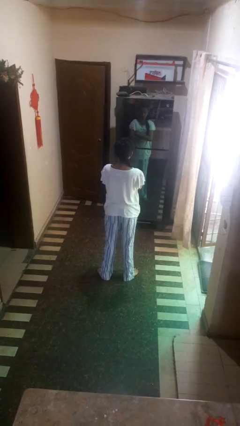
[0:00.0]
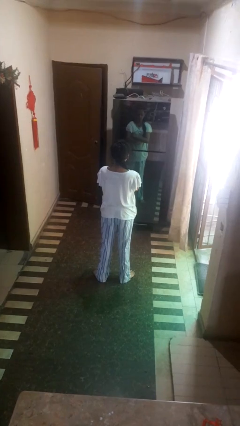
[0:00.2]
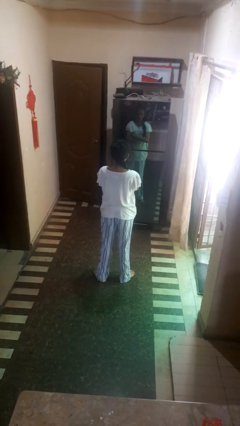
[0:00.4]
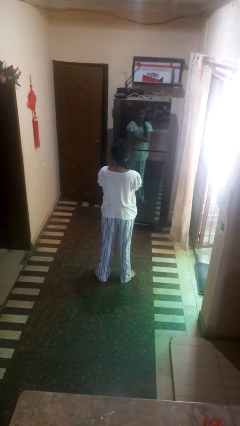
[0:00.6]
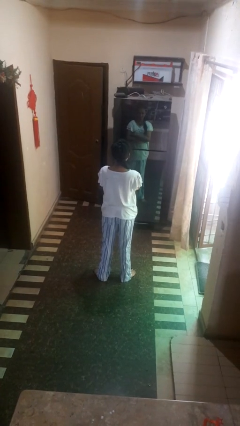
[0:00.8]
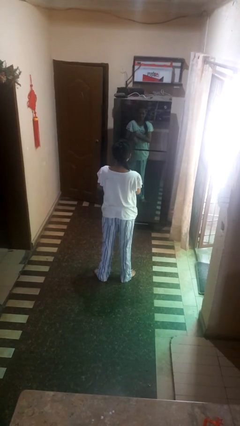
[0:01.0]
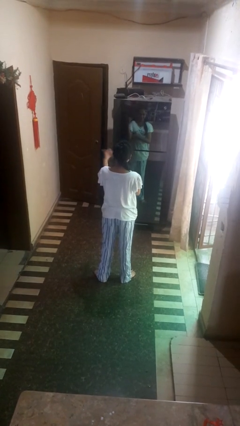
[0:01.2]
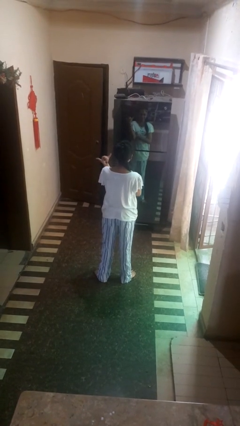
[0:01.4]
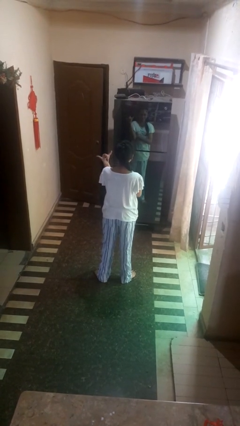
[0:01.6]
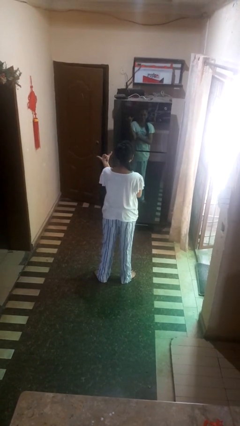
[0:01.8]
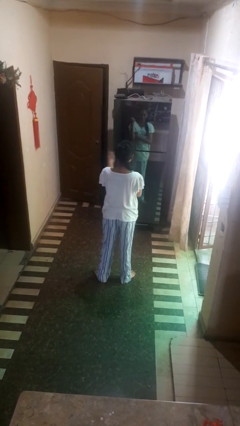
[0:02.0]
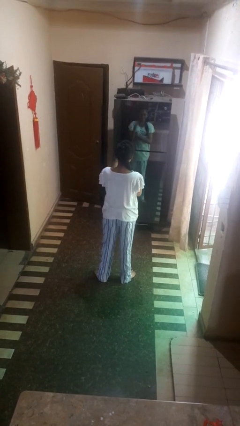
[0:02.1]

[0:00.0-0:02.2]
person gestures hang loose

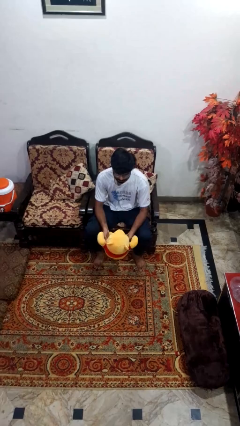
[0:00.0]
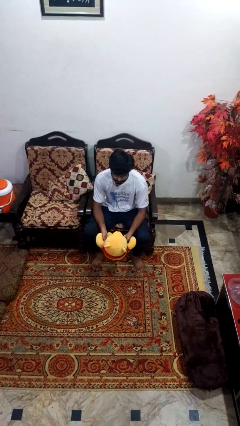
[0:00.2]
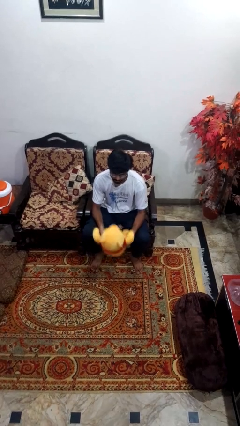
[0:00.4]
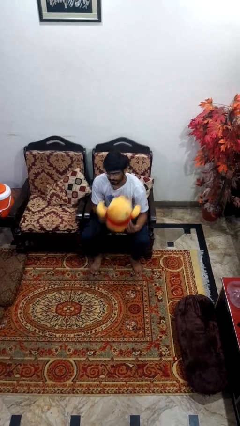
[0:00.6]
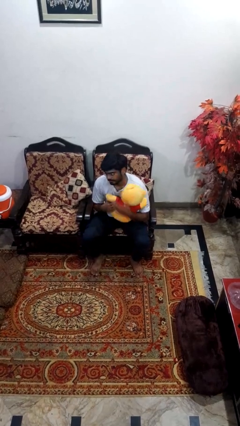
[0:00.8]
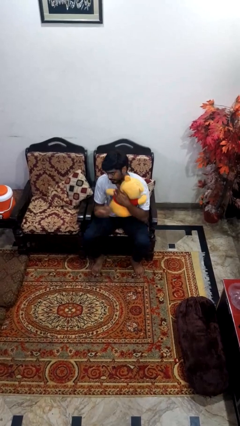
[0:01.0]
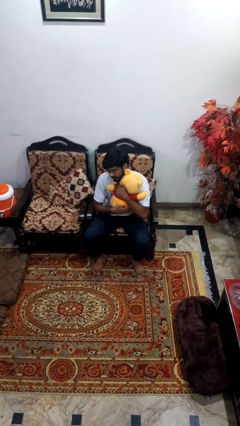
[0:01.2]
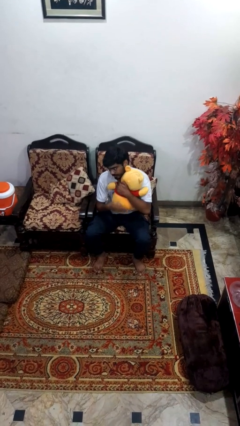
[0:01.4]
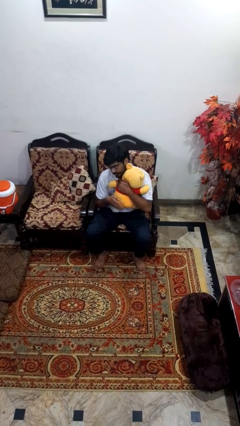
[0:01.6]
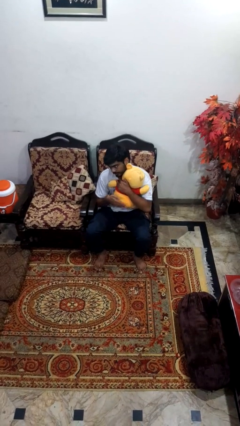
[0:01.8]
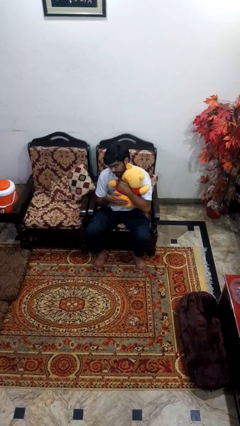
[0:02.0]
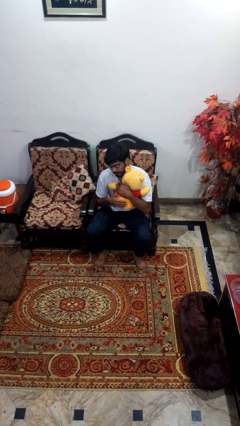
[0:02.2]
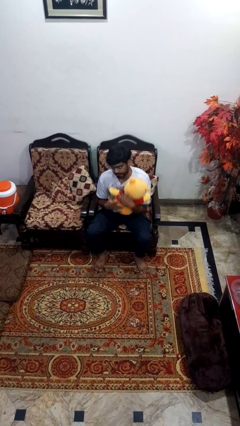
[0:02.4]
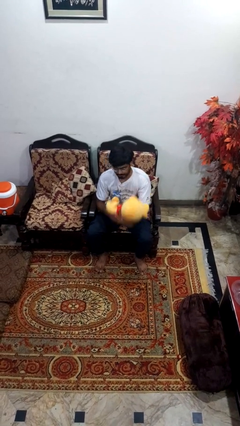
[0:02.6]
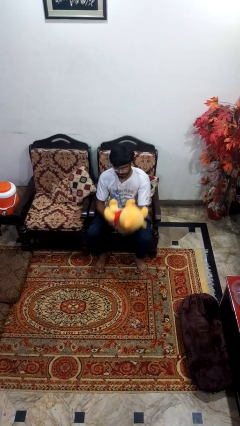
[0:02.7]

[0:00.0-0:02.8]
person hugs stuffed animal

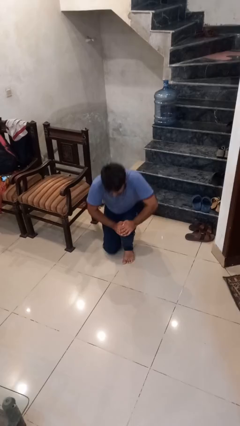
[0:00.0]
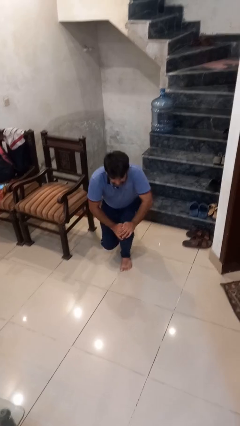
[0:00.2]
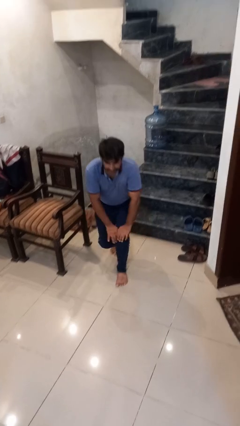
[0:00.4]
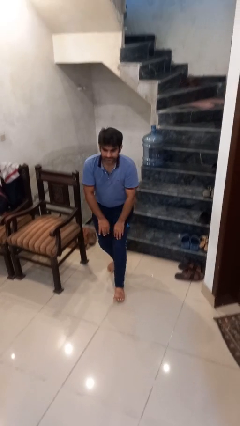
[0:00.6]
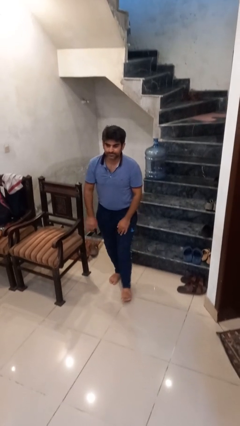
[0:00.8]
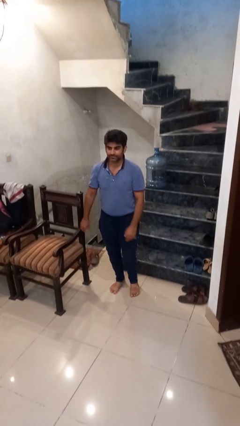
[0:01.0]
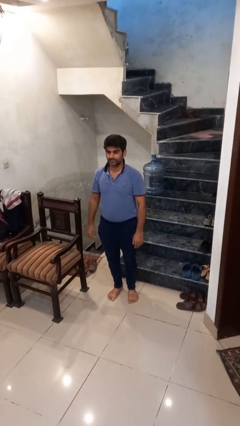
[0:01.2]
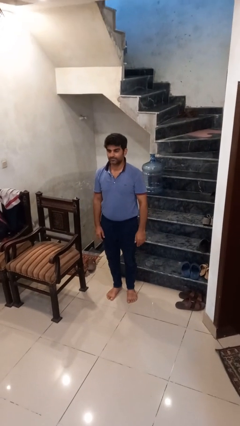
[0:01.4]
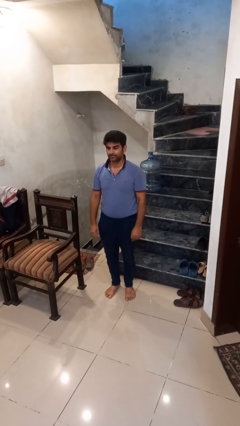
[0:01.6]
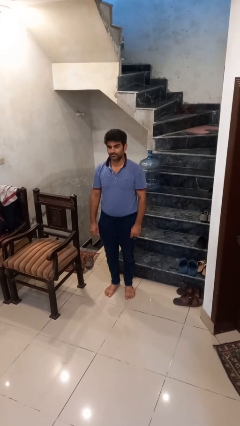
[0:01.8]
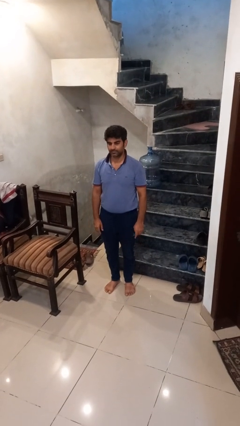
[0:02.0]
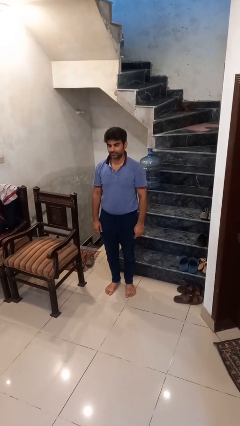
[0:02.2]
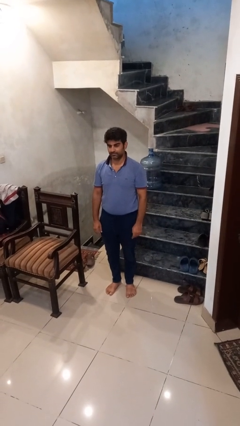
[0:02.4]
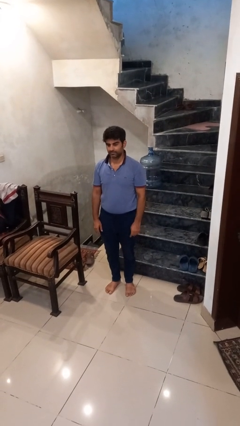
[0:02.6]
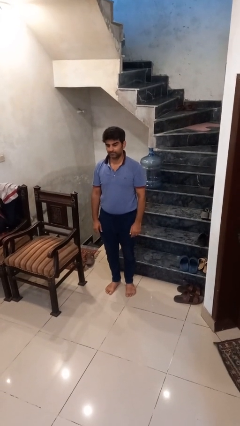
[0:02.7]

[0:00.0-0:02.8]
person stands up from floor

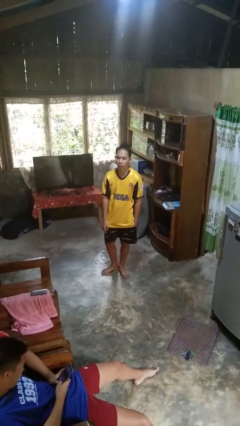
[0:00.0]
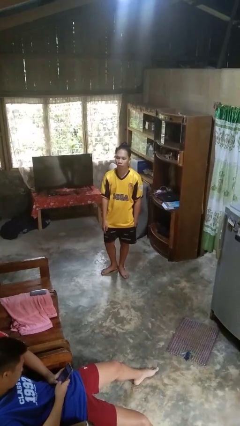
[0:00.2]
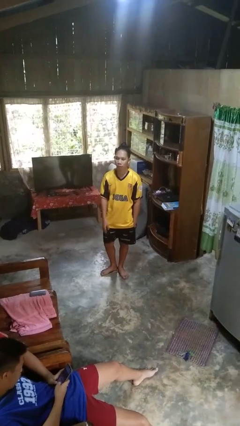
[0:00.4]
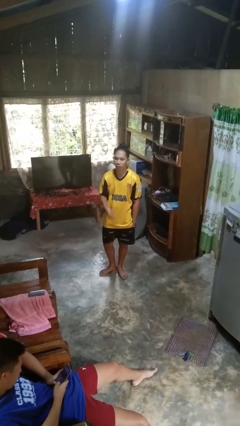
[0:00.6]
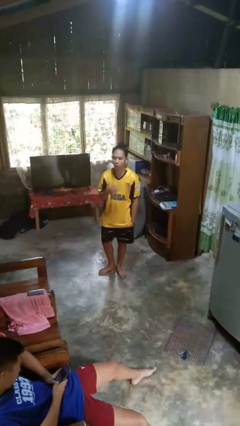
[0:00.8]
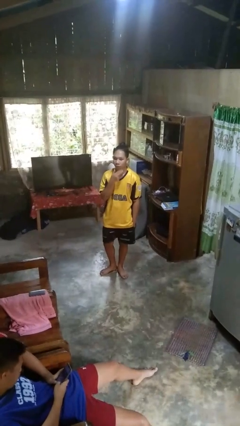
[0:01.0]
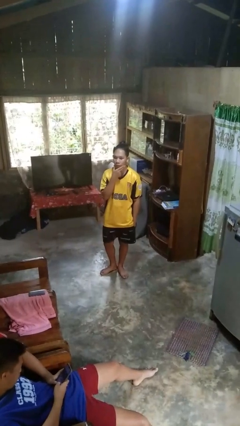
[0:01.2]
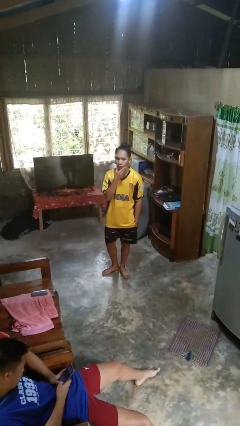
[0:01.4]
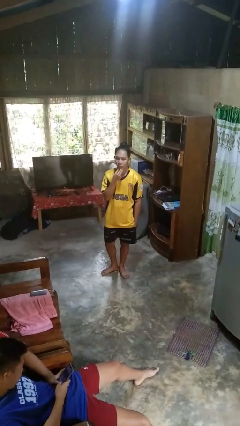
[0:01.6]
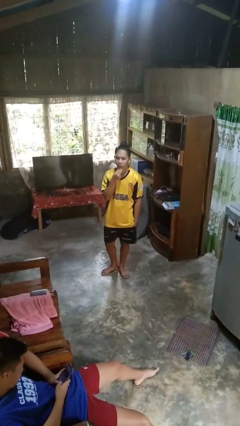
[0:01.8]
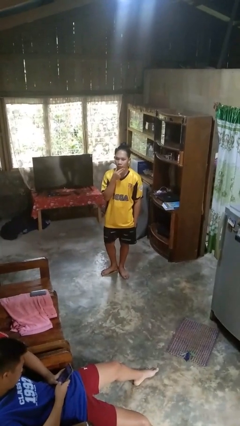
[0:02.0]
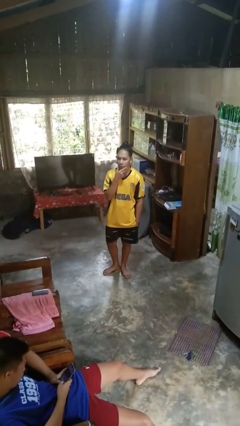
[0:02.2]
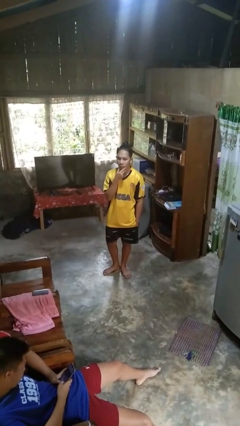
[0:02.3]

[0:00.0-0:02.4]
person strokes chin

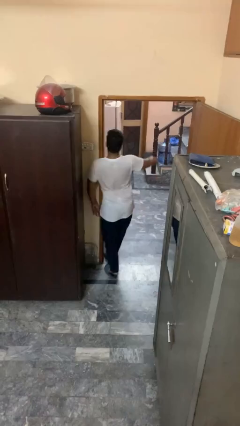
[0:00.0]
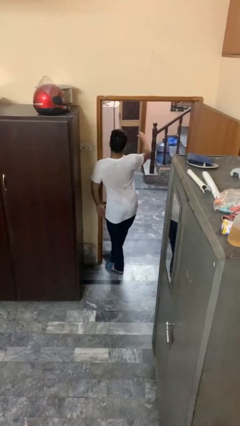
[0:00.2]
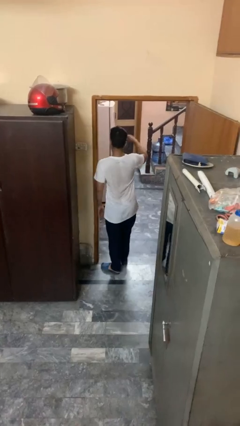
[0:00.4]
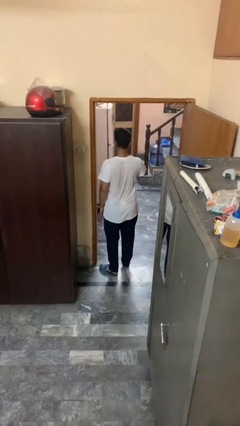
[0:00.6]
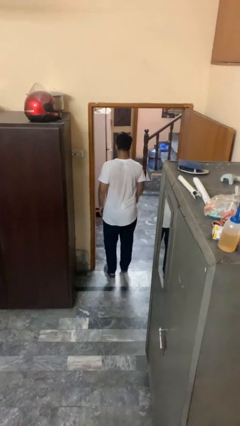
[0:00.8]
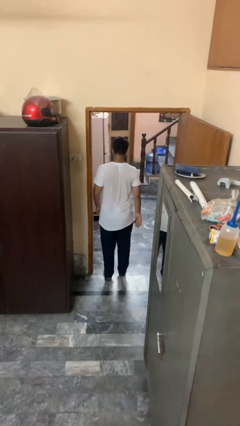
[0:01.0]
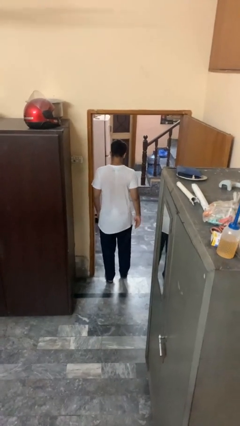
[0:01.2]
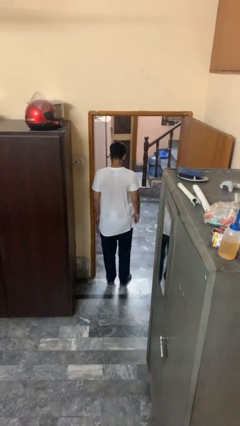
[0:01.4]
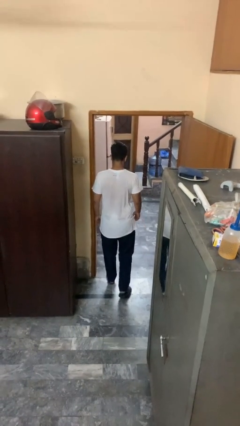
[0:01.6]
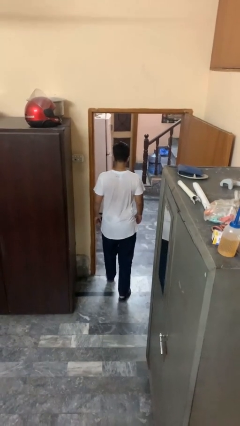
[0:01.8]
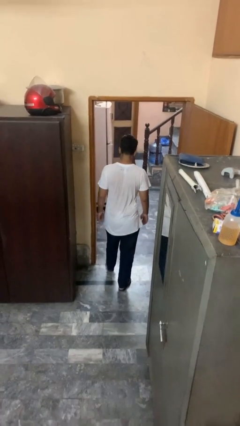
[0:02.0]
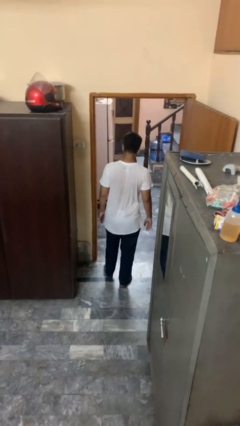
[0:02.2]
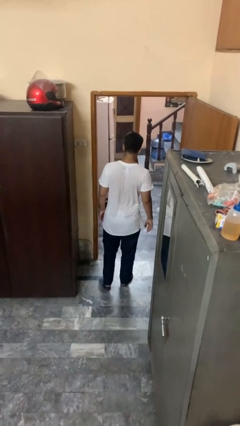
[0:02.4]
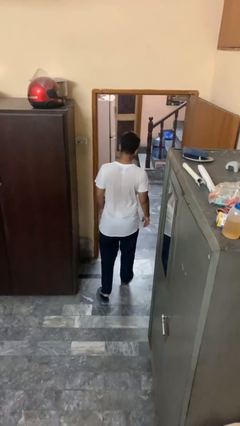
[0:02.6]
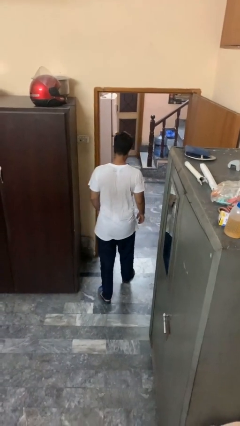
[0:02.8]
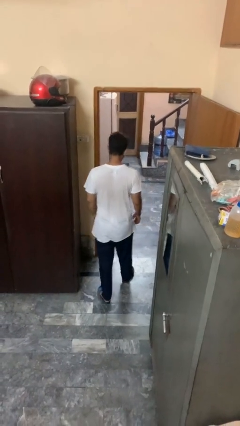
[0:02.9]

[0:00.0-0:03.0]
person bumps into wall

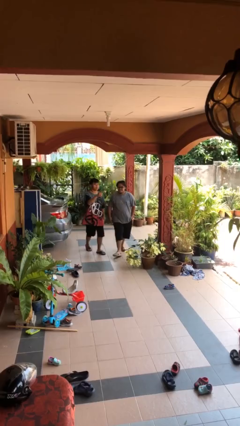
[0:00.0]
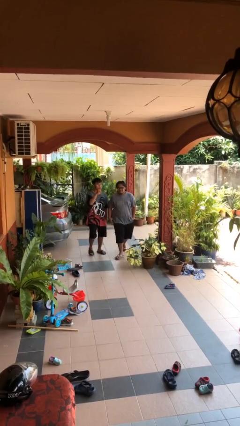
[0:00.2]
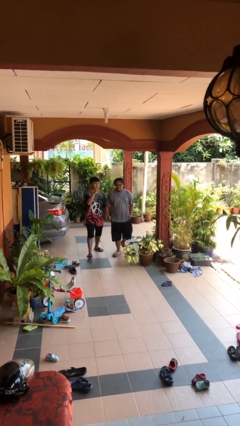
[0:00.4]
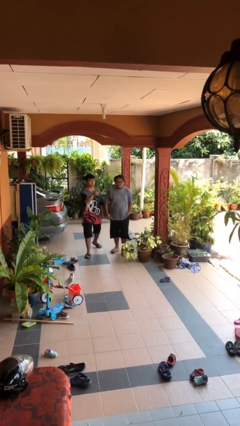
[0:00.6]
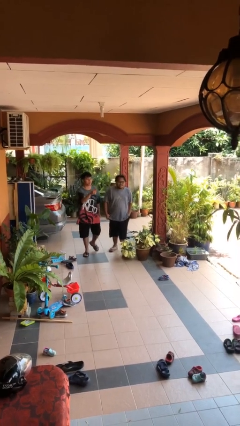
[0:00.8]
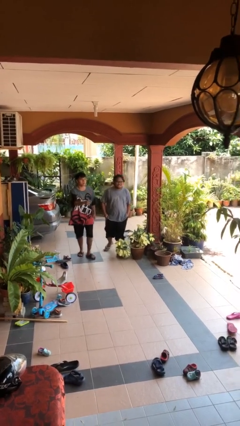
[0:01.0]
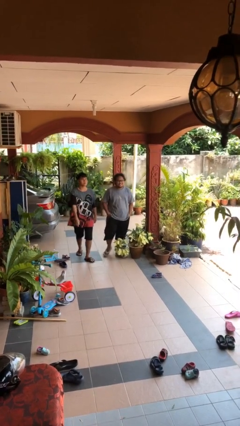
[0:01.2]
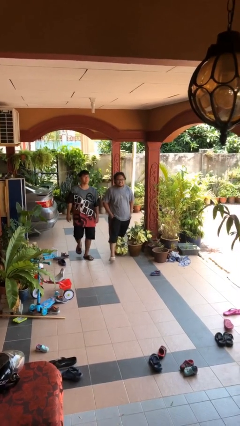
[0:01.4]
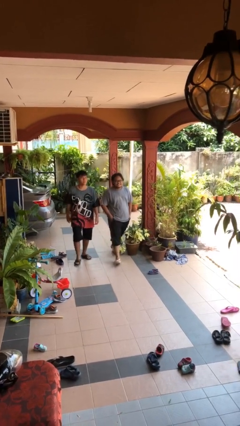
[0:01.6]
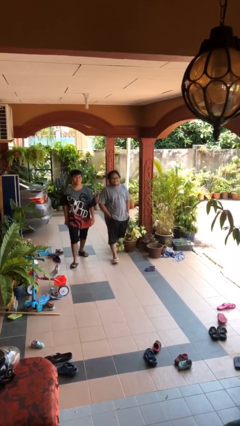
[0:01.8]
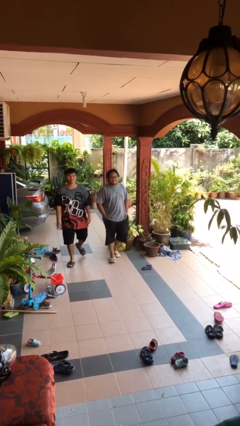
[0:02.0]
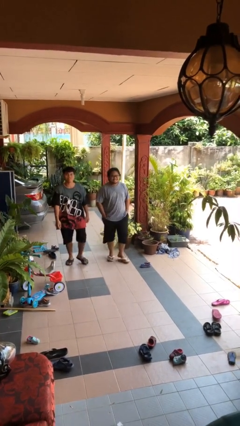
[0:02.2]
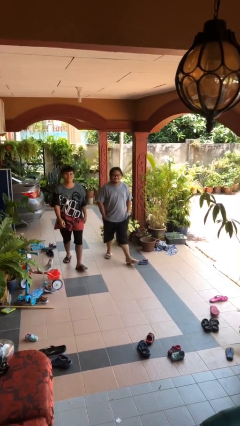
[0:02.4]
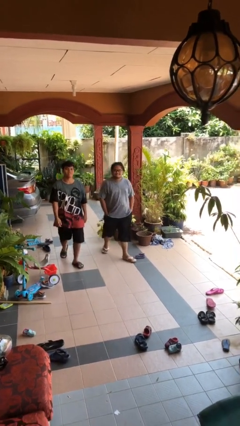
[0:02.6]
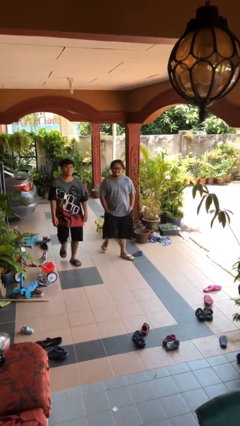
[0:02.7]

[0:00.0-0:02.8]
person talks to person

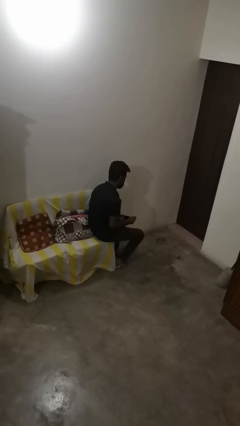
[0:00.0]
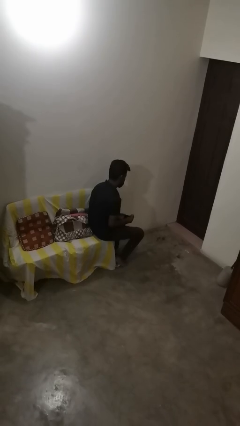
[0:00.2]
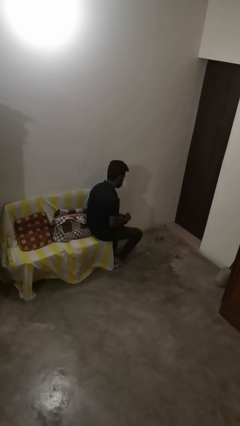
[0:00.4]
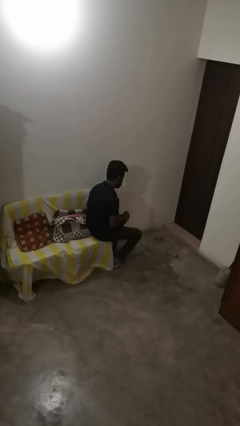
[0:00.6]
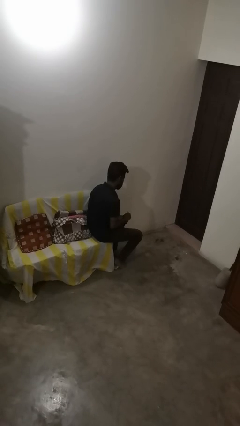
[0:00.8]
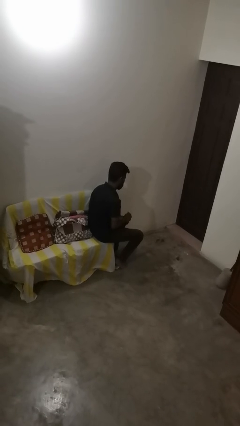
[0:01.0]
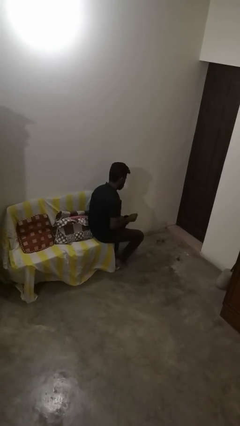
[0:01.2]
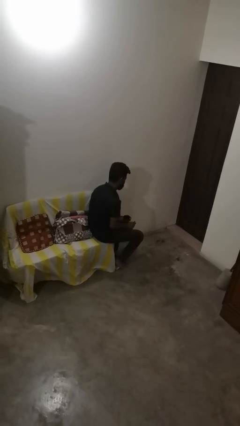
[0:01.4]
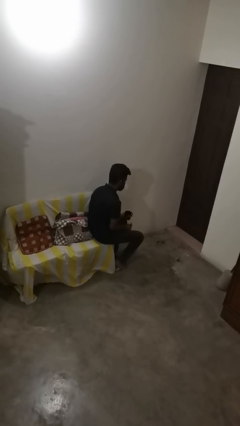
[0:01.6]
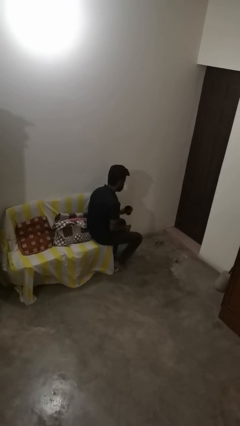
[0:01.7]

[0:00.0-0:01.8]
person stirs mug
